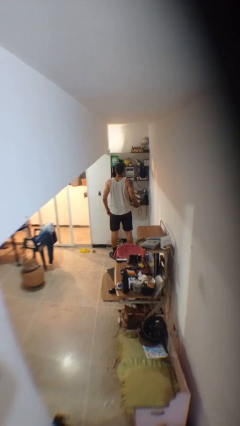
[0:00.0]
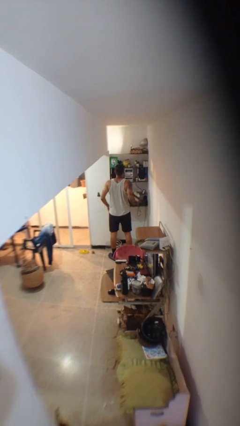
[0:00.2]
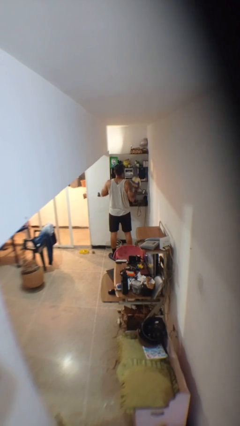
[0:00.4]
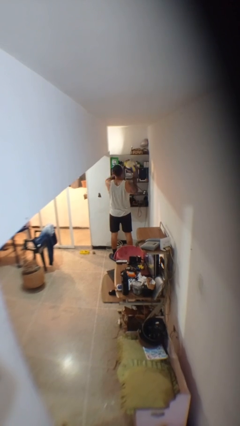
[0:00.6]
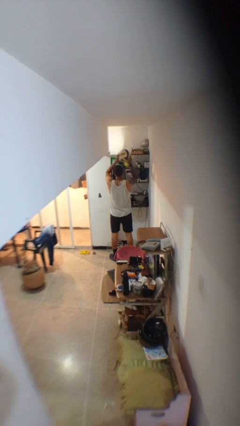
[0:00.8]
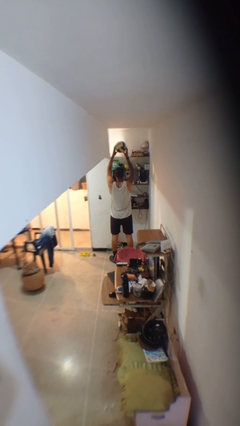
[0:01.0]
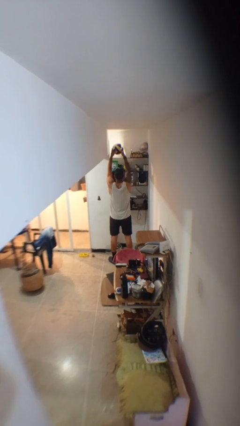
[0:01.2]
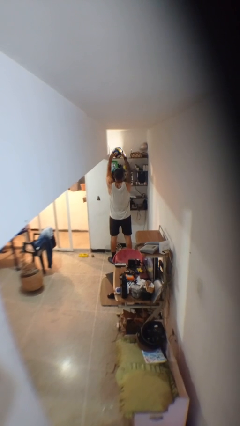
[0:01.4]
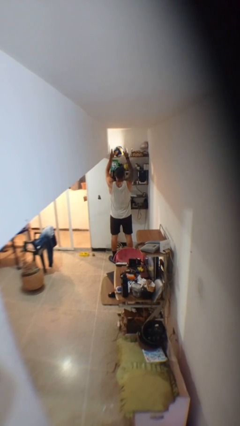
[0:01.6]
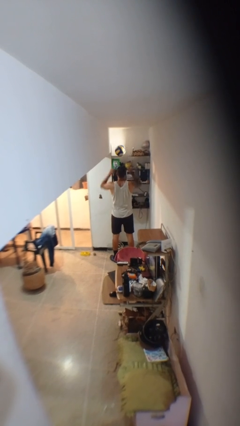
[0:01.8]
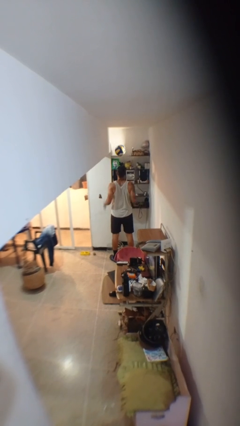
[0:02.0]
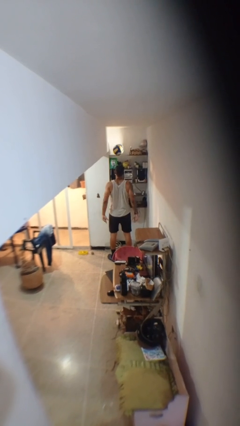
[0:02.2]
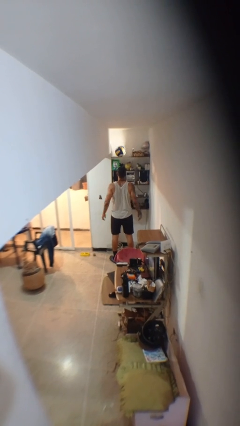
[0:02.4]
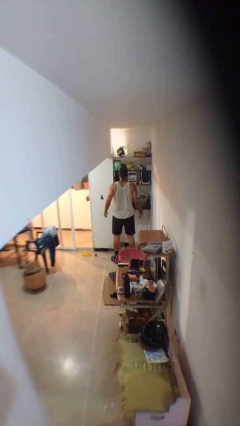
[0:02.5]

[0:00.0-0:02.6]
person puts down object on shelf

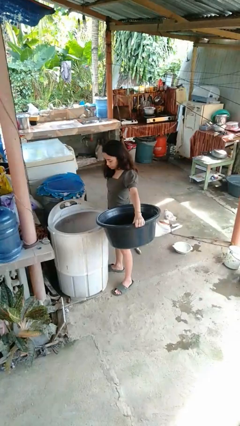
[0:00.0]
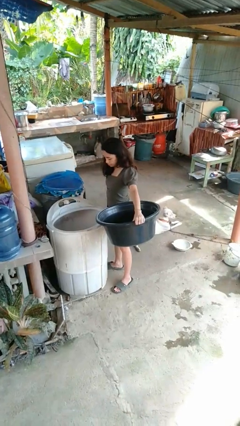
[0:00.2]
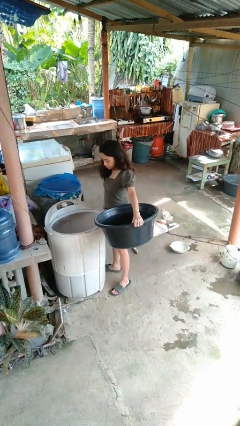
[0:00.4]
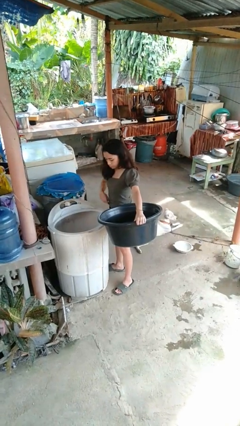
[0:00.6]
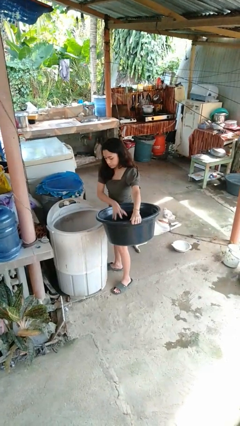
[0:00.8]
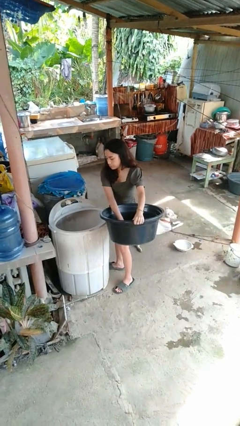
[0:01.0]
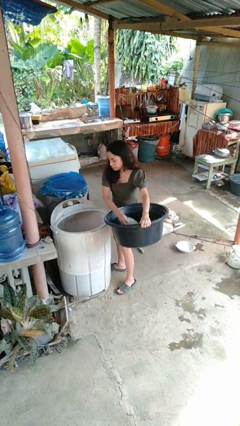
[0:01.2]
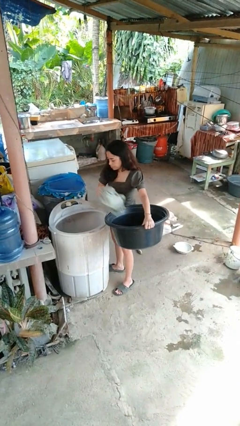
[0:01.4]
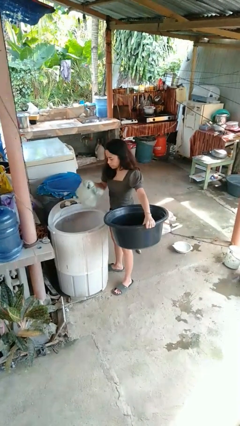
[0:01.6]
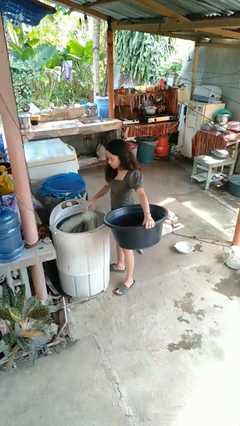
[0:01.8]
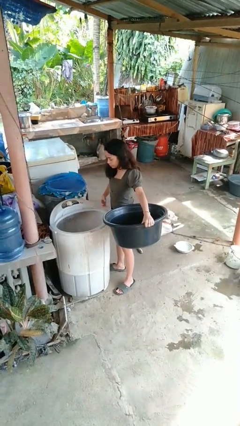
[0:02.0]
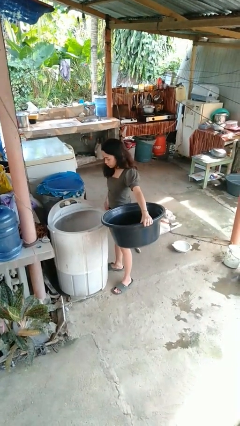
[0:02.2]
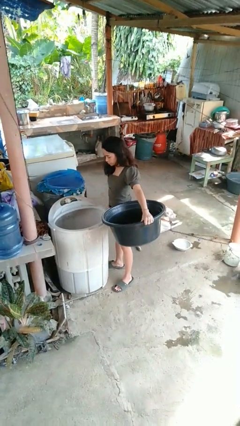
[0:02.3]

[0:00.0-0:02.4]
person loads clotheswasher

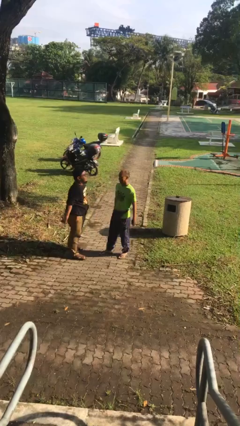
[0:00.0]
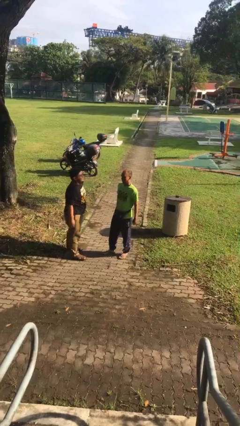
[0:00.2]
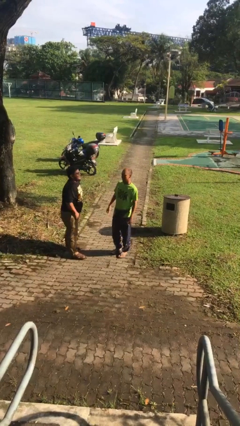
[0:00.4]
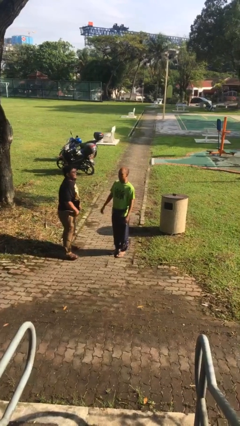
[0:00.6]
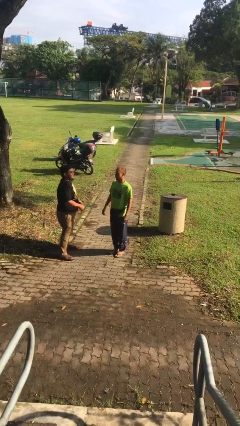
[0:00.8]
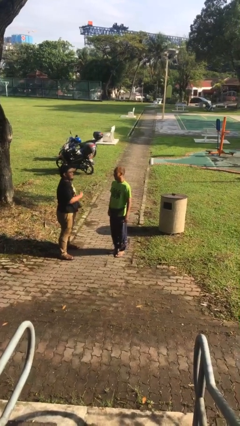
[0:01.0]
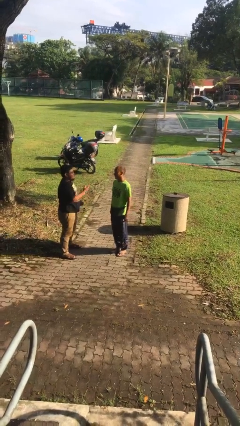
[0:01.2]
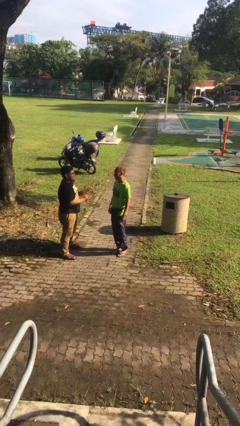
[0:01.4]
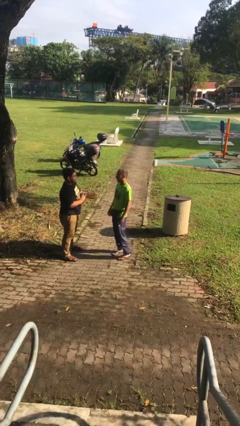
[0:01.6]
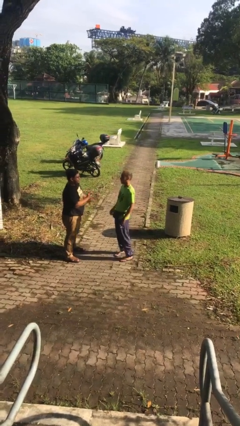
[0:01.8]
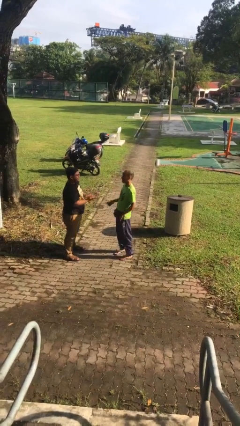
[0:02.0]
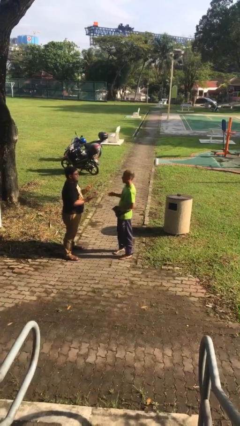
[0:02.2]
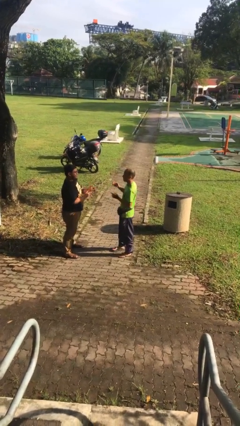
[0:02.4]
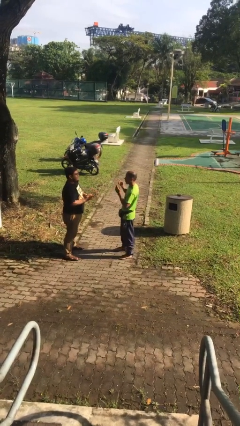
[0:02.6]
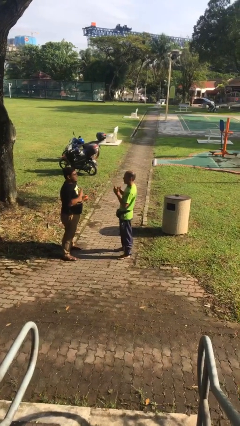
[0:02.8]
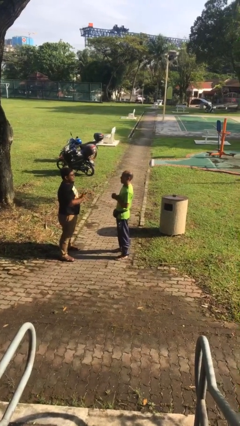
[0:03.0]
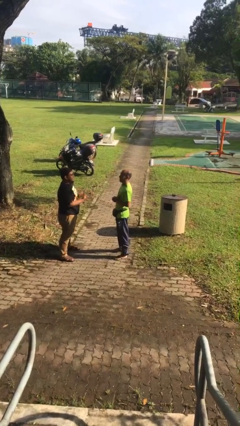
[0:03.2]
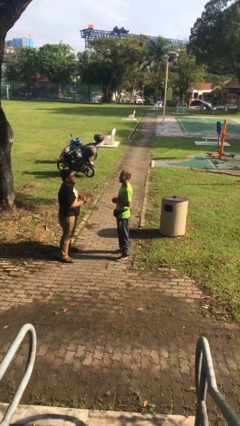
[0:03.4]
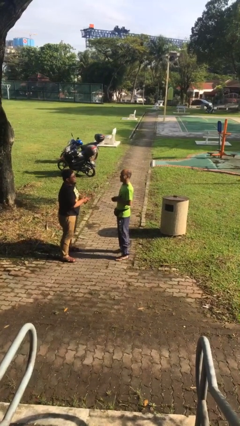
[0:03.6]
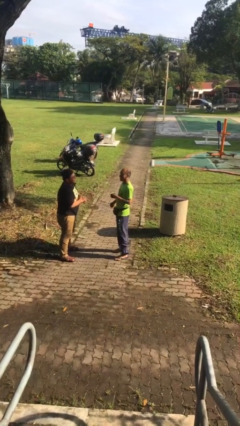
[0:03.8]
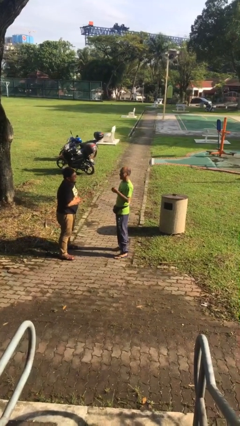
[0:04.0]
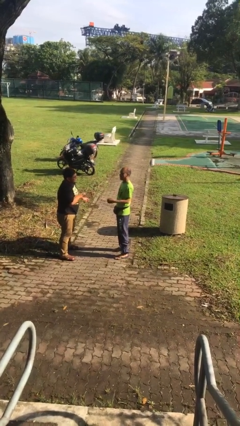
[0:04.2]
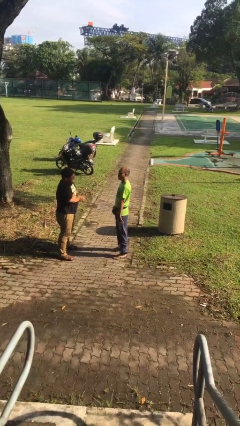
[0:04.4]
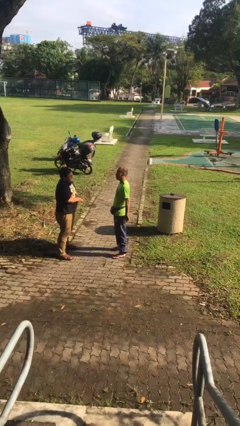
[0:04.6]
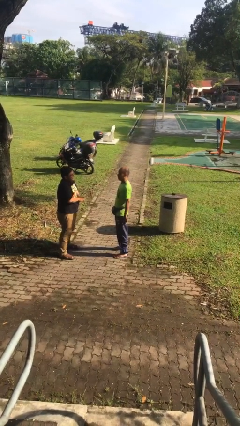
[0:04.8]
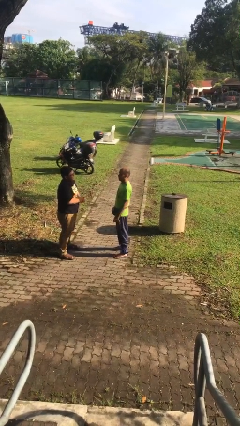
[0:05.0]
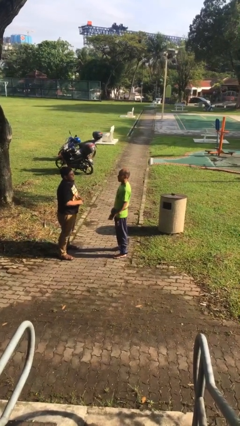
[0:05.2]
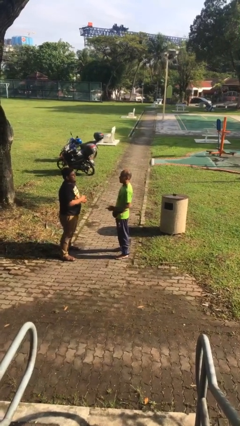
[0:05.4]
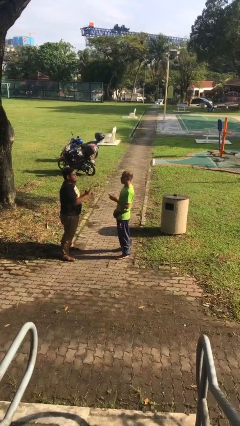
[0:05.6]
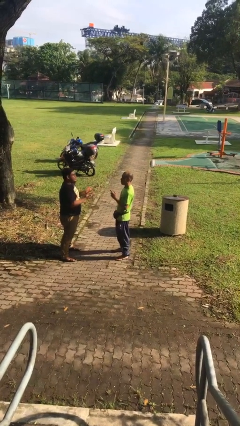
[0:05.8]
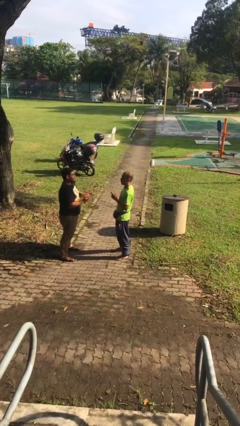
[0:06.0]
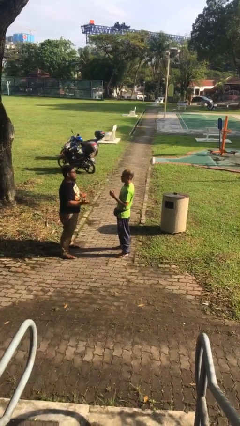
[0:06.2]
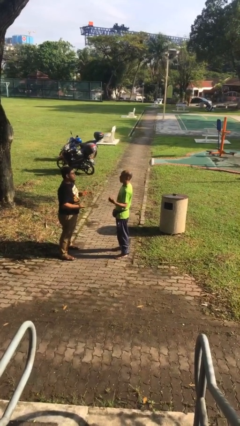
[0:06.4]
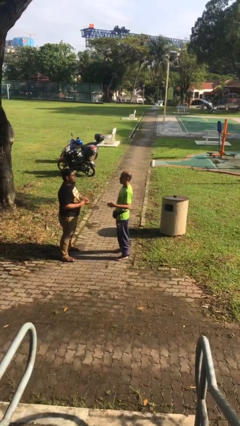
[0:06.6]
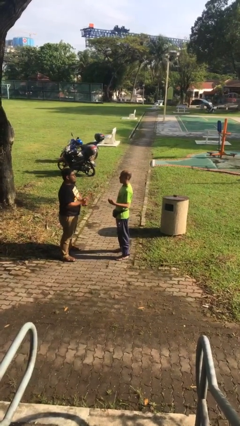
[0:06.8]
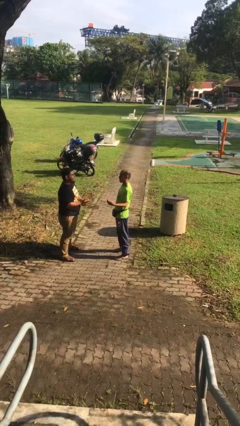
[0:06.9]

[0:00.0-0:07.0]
person talks to person

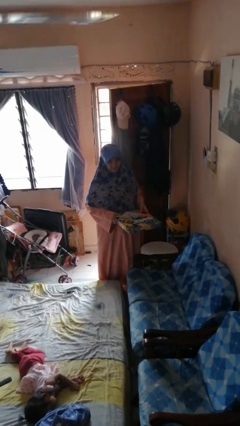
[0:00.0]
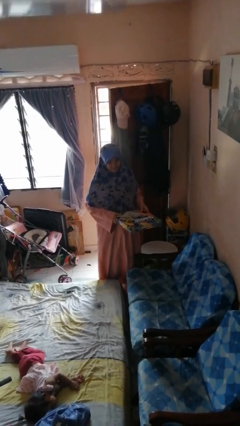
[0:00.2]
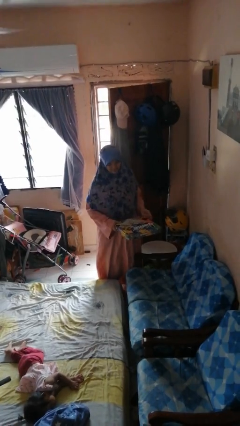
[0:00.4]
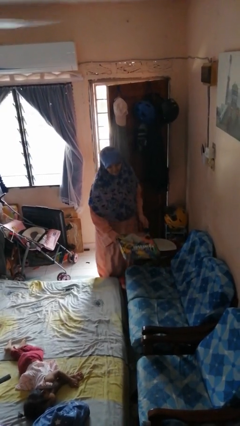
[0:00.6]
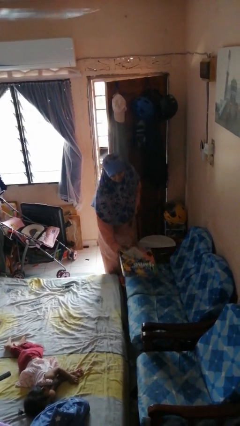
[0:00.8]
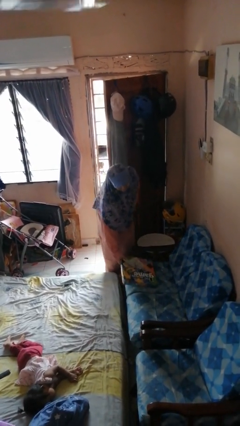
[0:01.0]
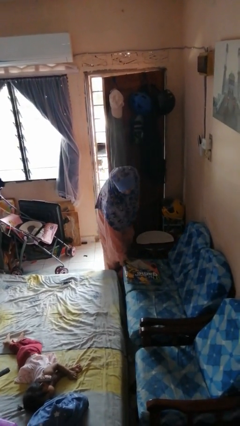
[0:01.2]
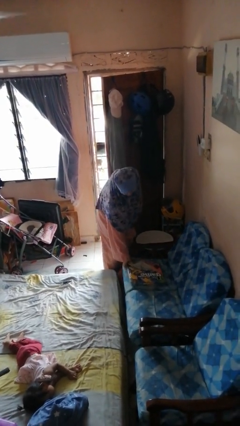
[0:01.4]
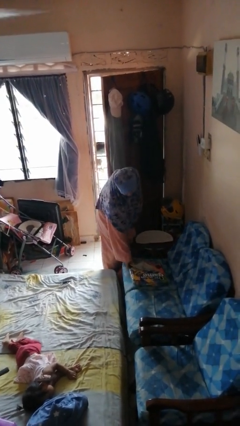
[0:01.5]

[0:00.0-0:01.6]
person puts down object on couch

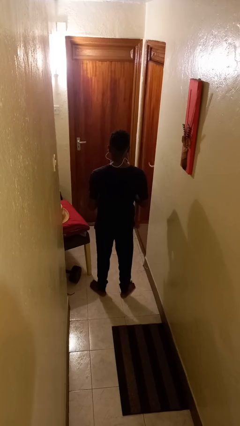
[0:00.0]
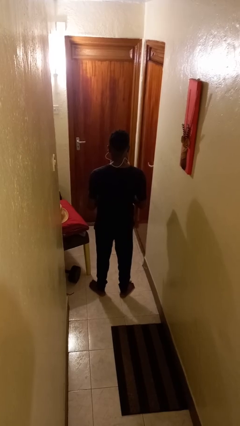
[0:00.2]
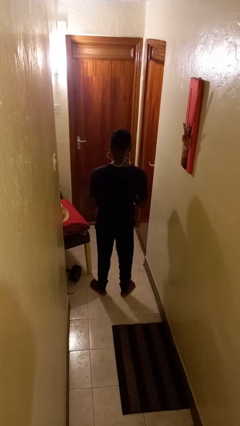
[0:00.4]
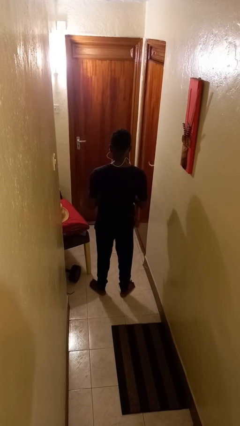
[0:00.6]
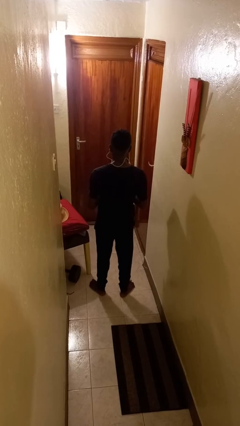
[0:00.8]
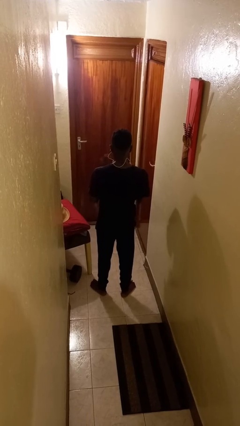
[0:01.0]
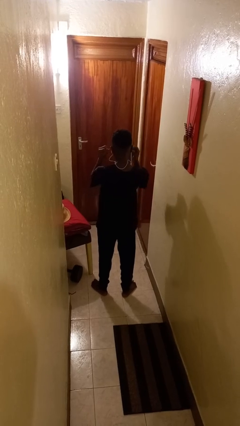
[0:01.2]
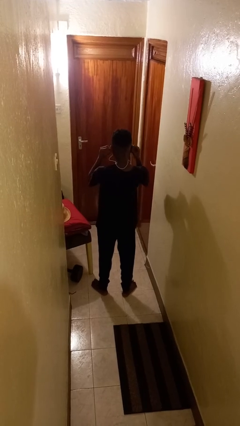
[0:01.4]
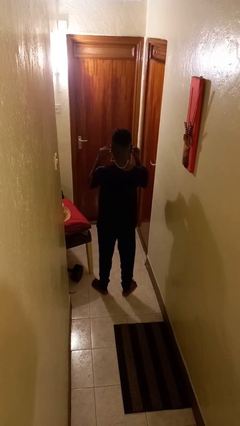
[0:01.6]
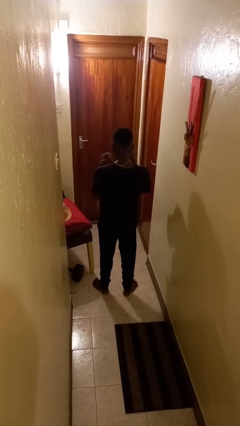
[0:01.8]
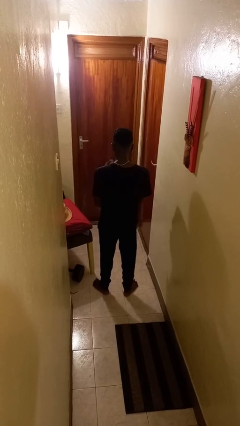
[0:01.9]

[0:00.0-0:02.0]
person takes off headphones

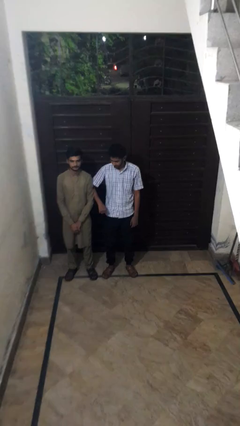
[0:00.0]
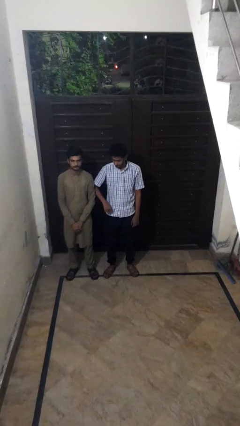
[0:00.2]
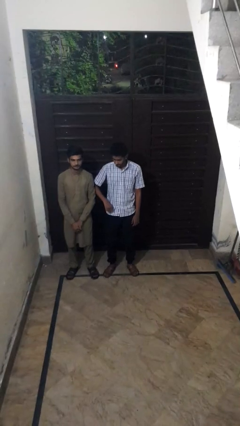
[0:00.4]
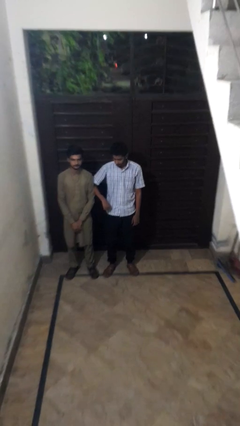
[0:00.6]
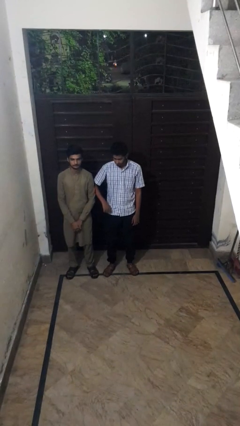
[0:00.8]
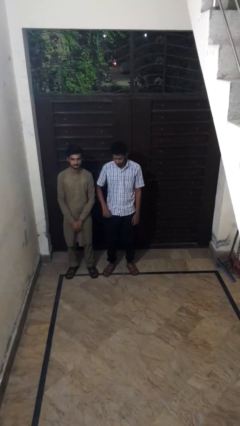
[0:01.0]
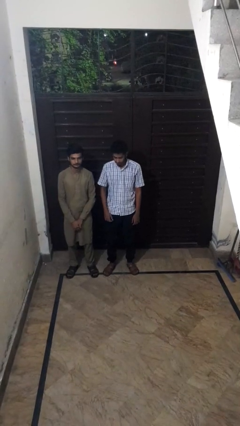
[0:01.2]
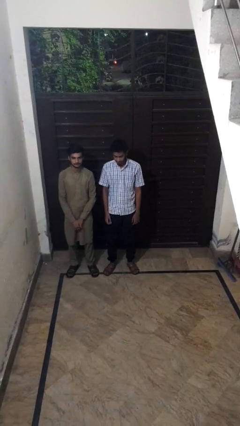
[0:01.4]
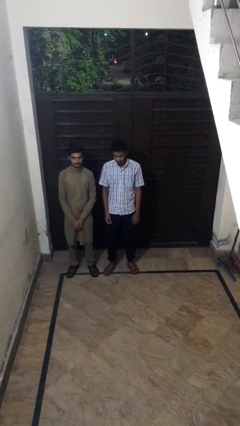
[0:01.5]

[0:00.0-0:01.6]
person nudges person with elbow
